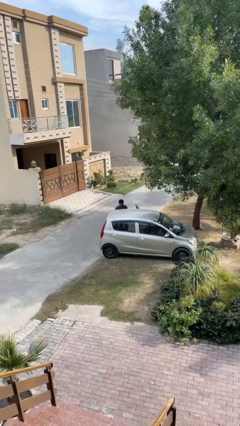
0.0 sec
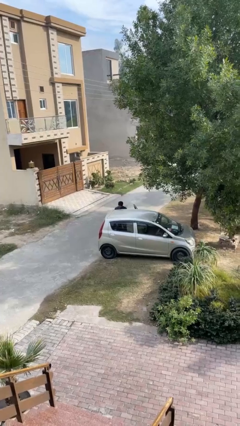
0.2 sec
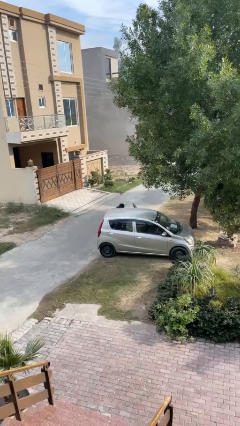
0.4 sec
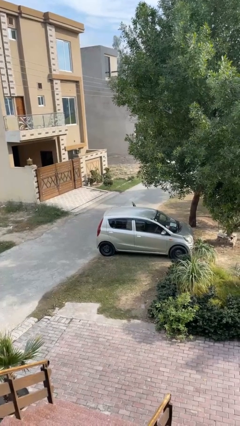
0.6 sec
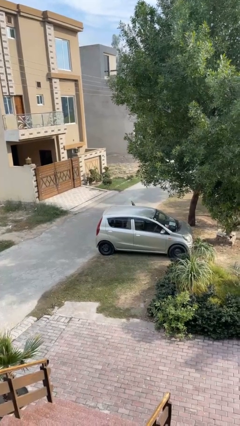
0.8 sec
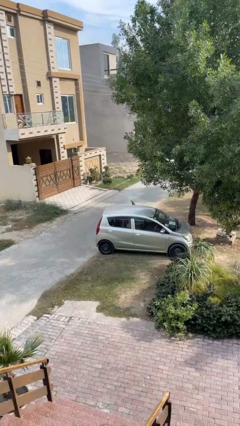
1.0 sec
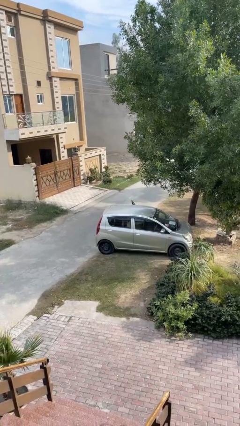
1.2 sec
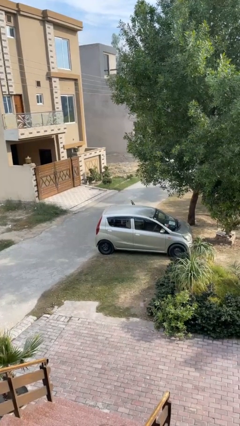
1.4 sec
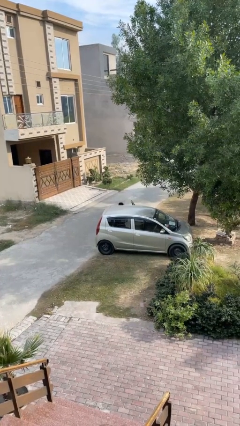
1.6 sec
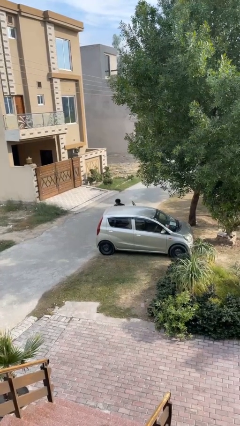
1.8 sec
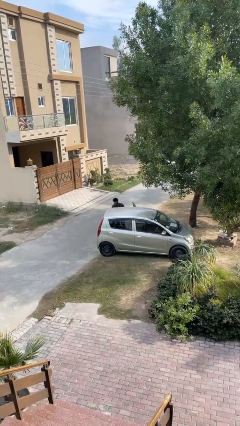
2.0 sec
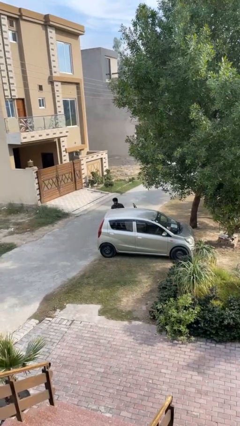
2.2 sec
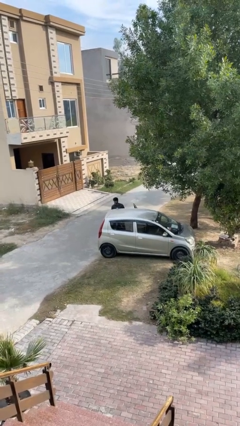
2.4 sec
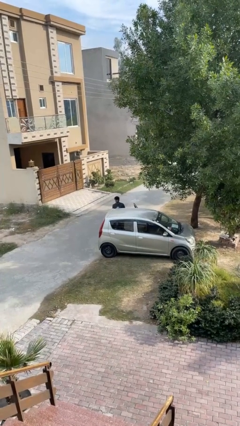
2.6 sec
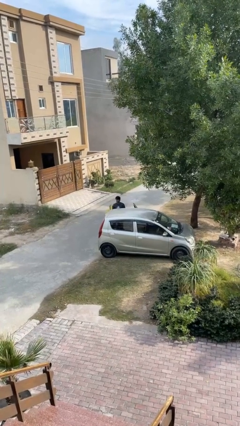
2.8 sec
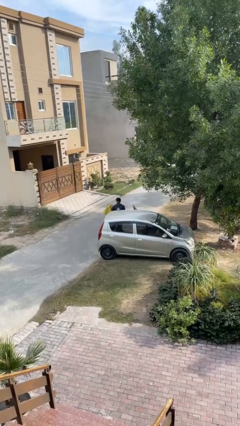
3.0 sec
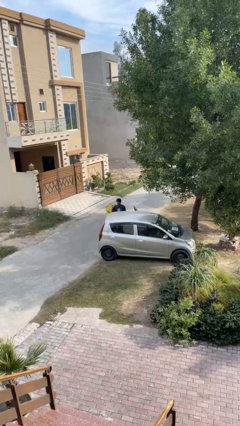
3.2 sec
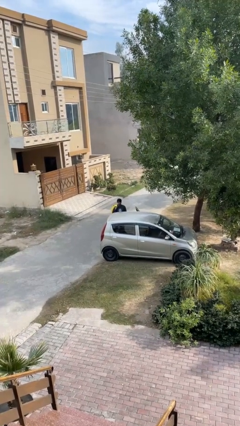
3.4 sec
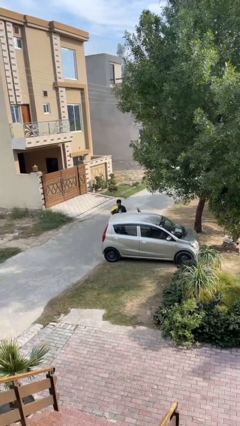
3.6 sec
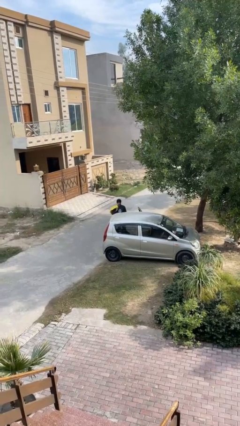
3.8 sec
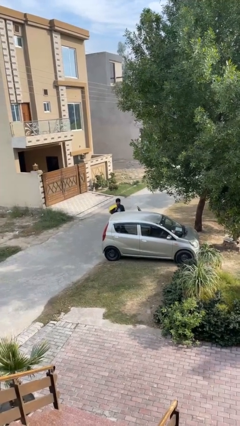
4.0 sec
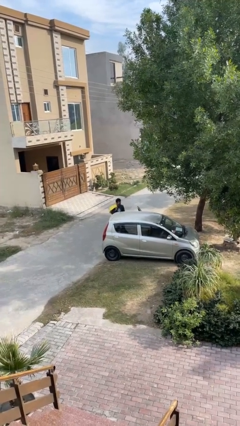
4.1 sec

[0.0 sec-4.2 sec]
person unloads car

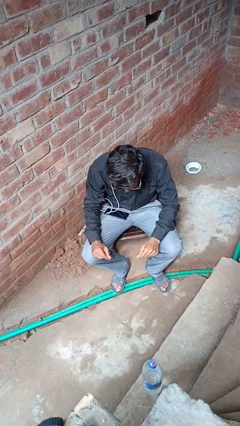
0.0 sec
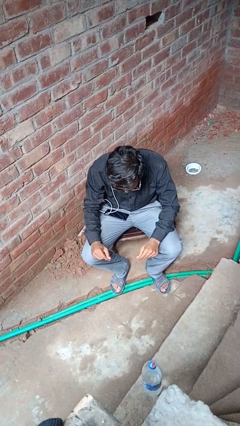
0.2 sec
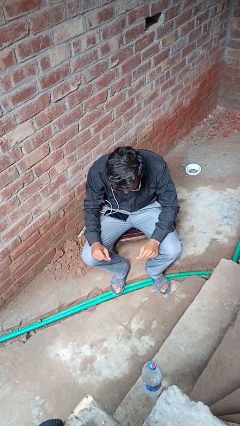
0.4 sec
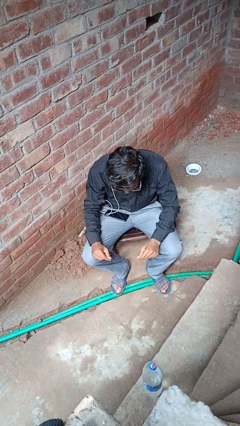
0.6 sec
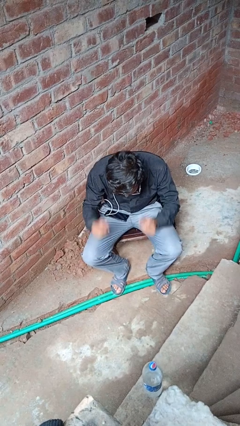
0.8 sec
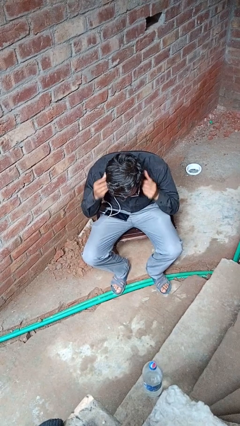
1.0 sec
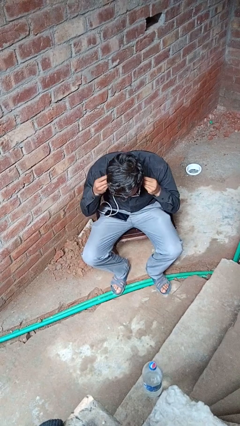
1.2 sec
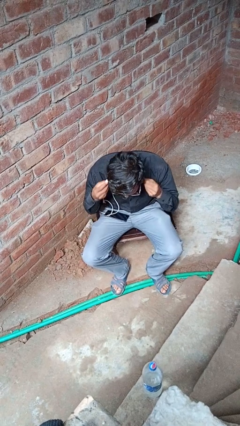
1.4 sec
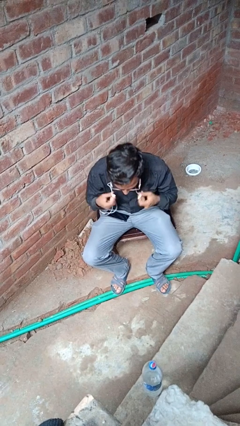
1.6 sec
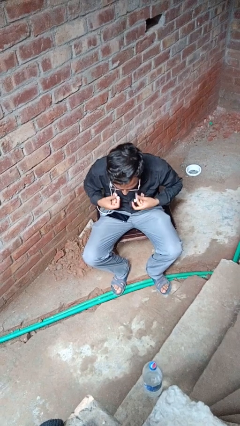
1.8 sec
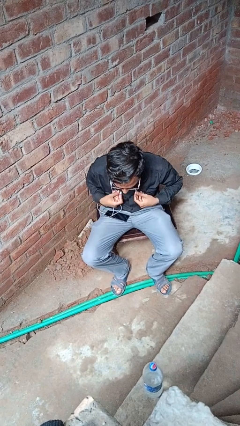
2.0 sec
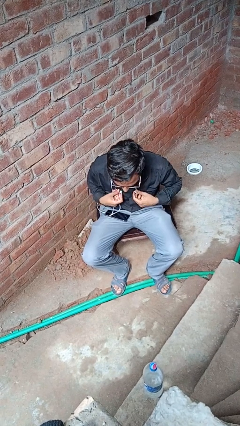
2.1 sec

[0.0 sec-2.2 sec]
person takes off headphones

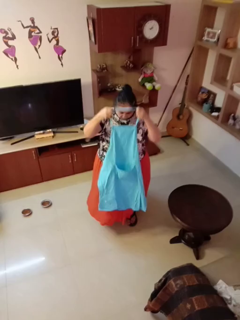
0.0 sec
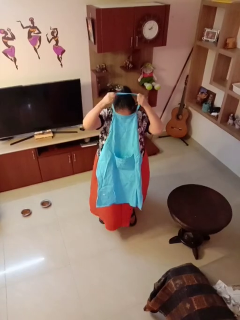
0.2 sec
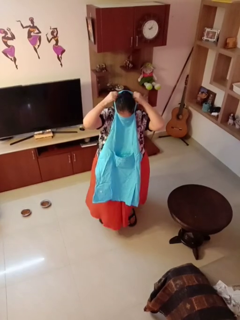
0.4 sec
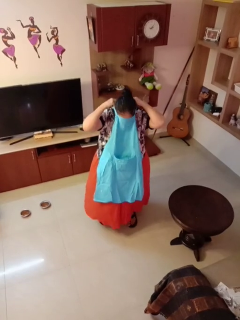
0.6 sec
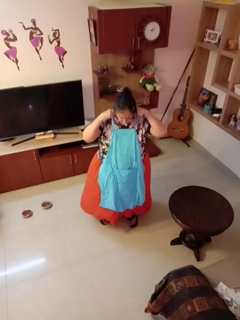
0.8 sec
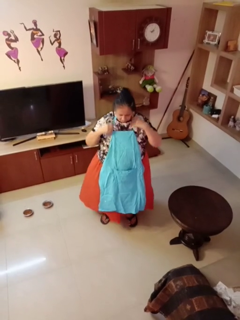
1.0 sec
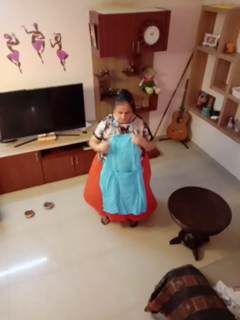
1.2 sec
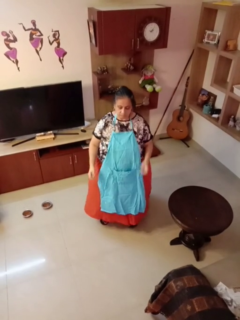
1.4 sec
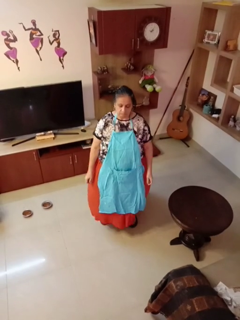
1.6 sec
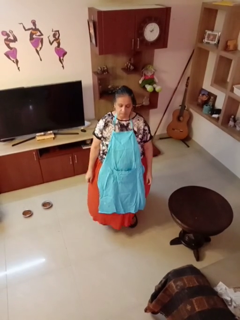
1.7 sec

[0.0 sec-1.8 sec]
person puts on apron

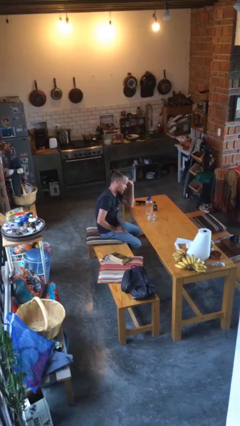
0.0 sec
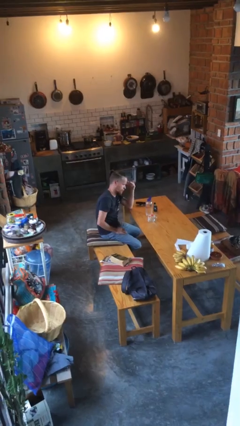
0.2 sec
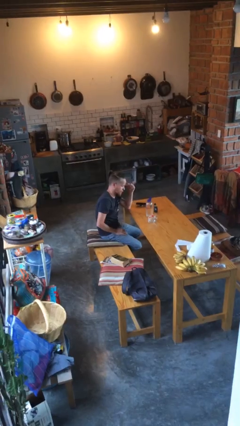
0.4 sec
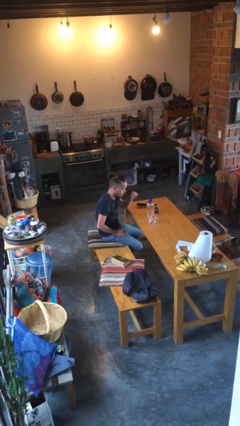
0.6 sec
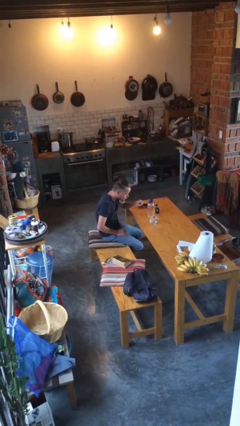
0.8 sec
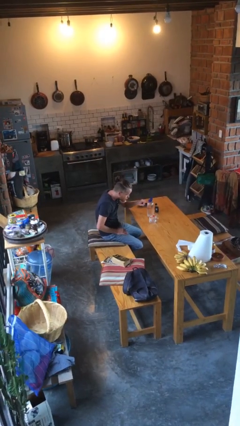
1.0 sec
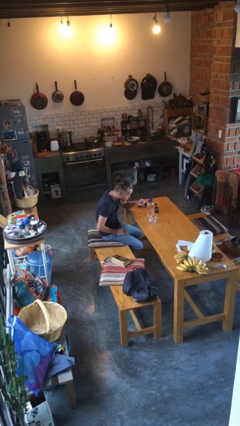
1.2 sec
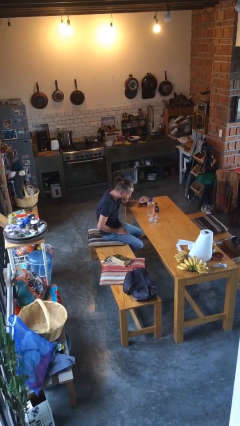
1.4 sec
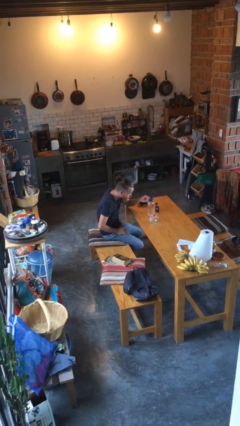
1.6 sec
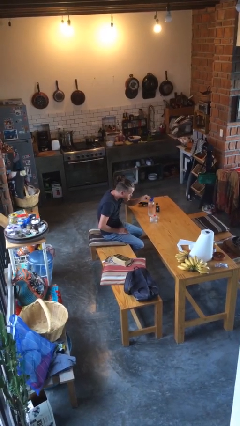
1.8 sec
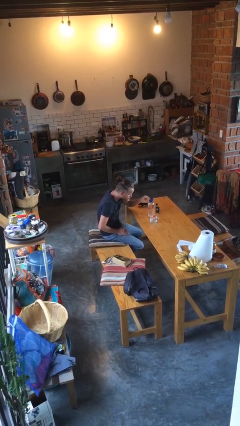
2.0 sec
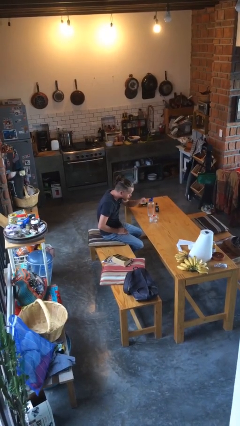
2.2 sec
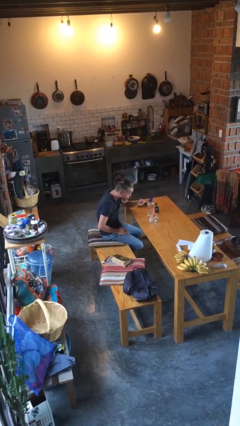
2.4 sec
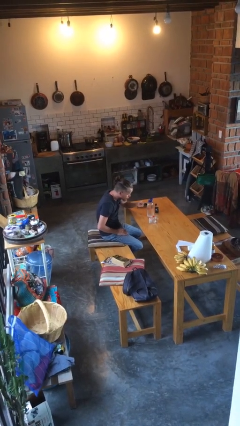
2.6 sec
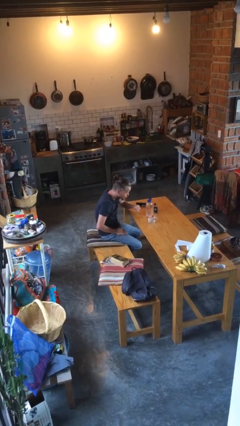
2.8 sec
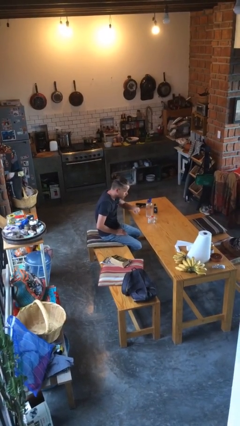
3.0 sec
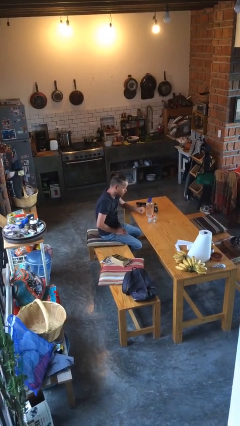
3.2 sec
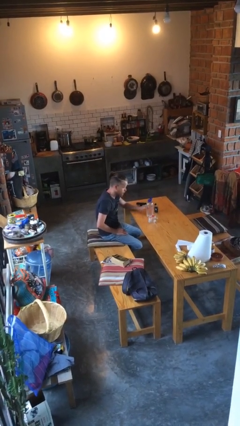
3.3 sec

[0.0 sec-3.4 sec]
person taps object with finger

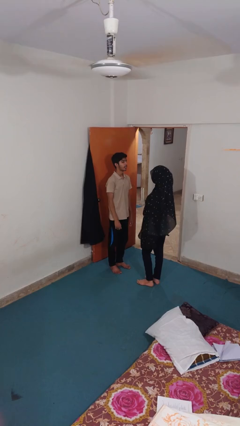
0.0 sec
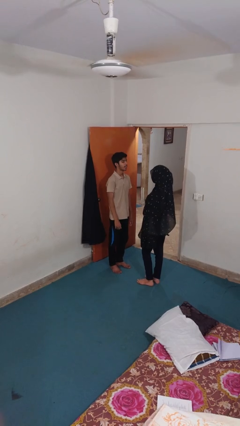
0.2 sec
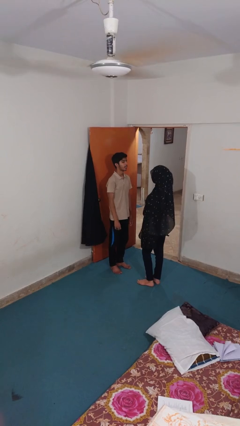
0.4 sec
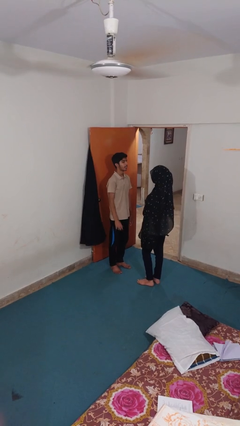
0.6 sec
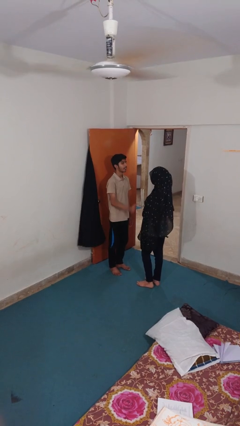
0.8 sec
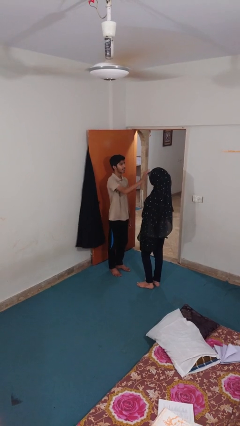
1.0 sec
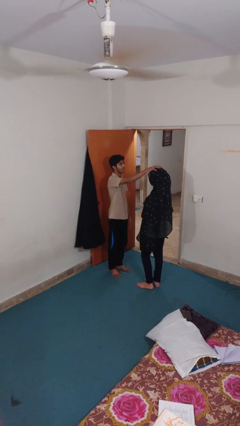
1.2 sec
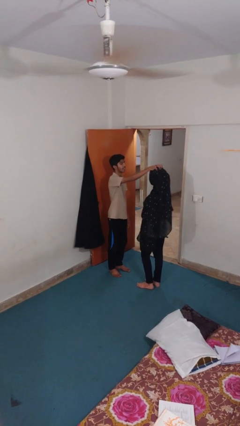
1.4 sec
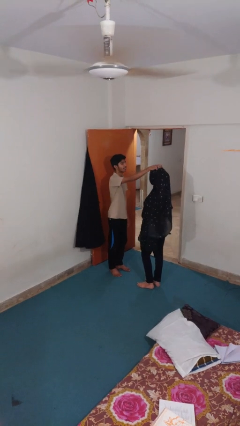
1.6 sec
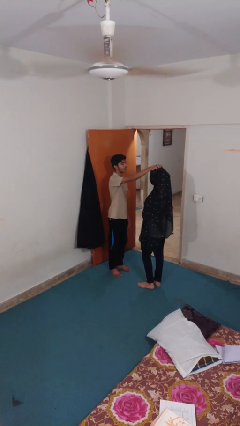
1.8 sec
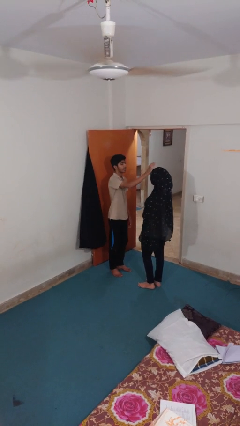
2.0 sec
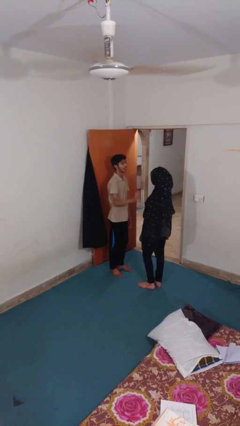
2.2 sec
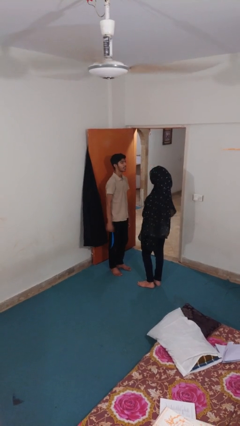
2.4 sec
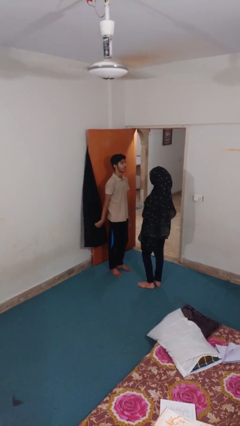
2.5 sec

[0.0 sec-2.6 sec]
person grabs person by hair

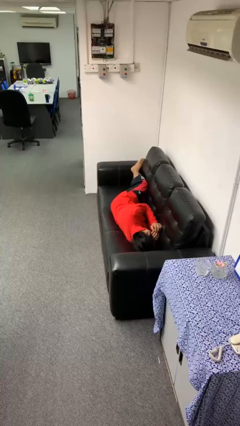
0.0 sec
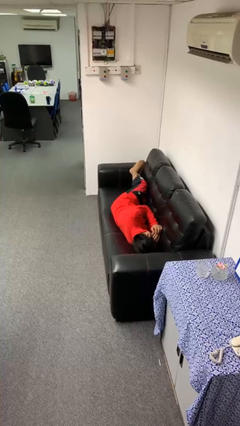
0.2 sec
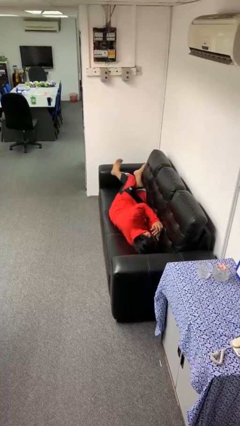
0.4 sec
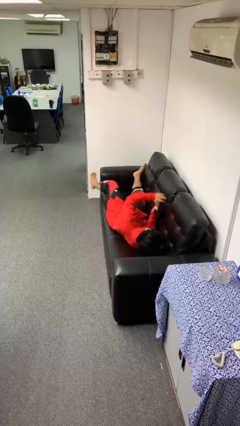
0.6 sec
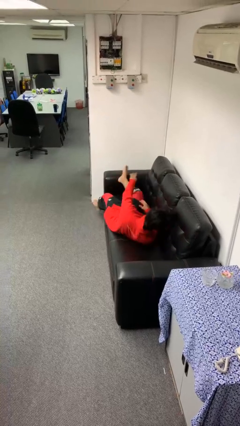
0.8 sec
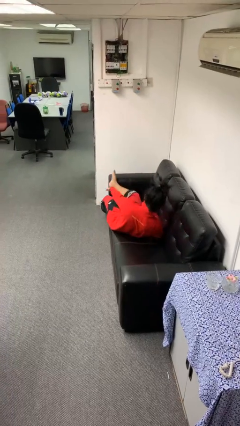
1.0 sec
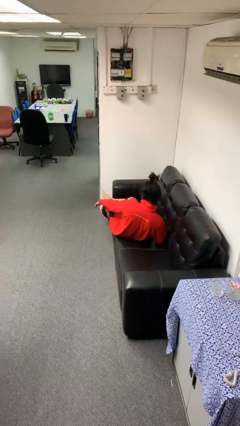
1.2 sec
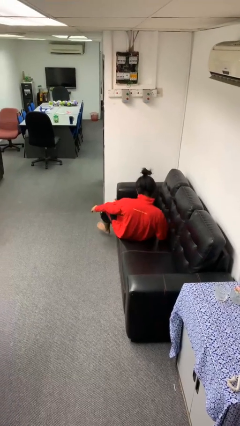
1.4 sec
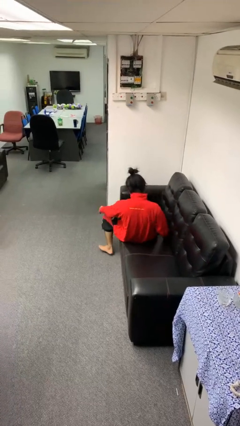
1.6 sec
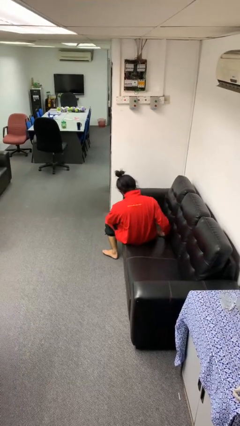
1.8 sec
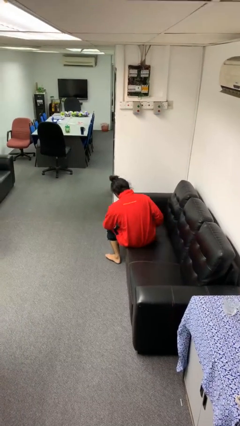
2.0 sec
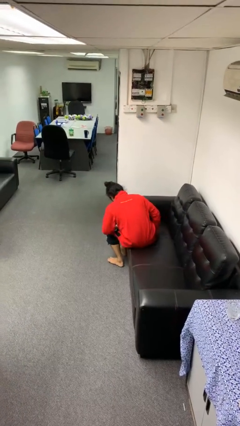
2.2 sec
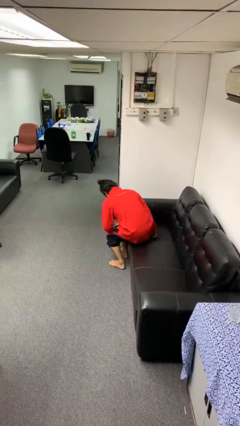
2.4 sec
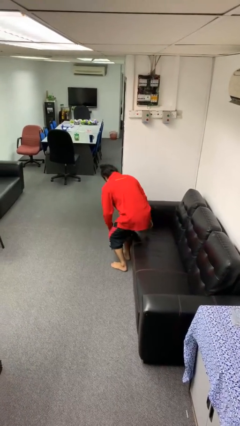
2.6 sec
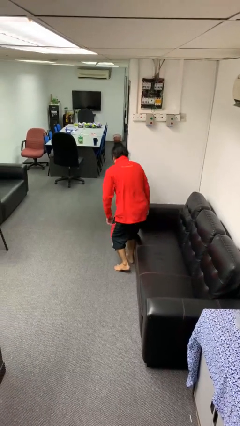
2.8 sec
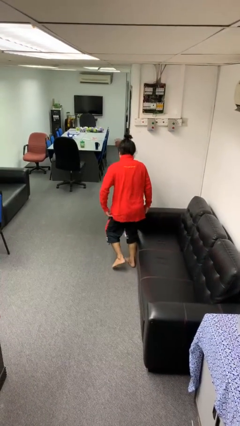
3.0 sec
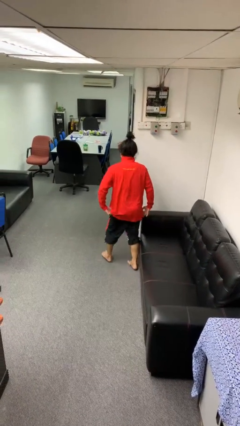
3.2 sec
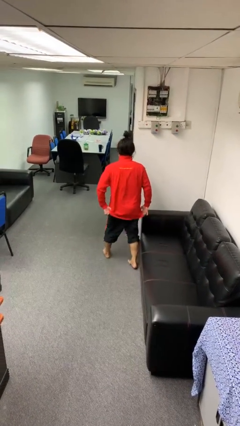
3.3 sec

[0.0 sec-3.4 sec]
person stands up

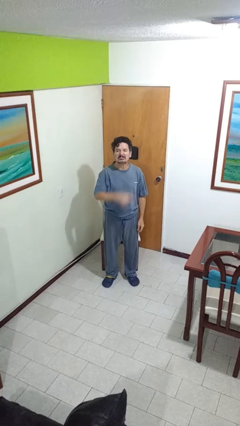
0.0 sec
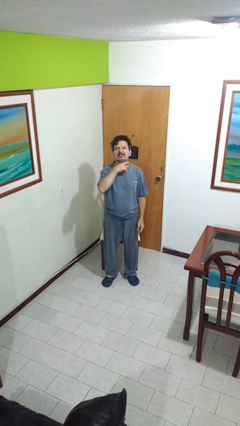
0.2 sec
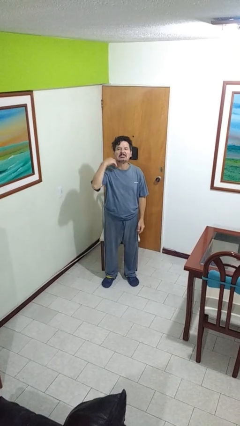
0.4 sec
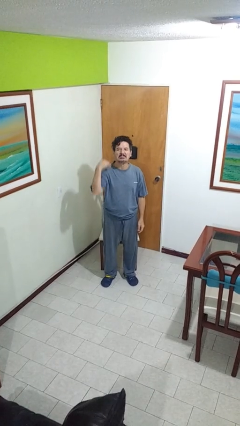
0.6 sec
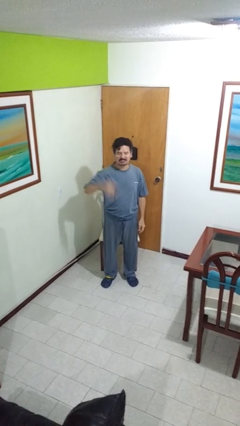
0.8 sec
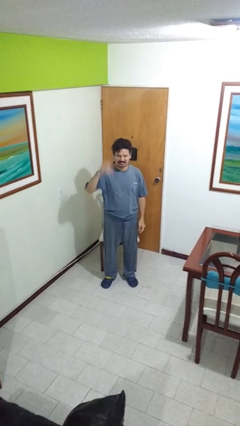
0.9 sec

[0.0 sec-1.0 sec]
person gestures cut
